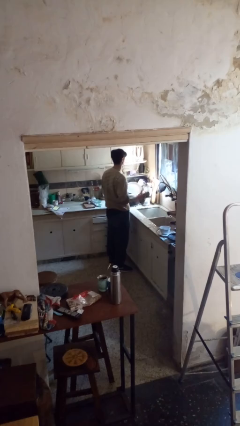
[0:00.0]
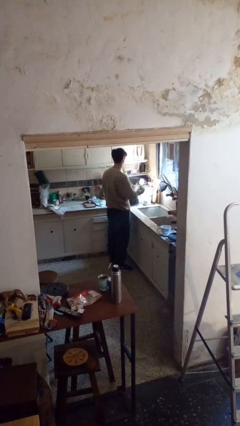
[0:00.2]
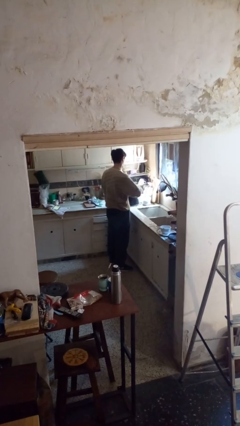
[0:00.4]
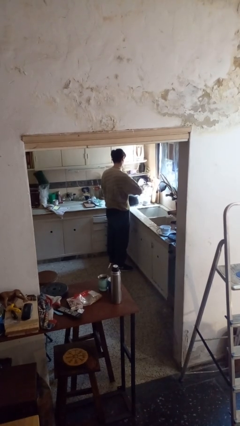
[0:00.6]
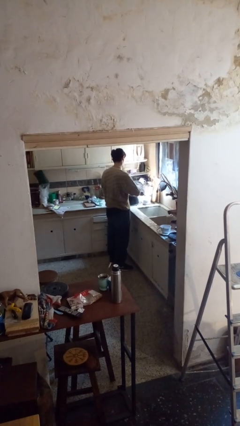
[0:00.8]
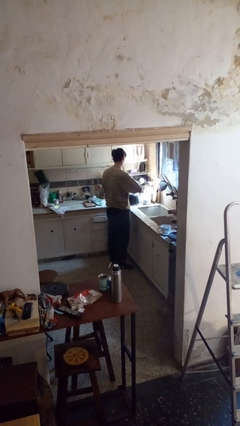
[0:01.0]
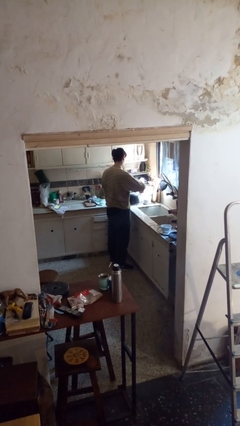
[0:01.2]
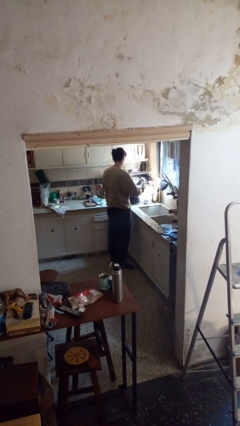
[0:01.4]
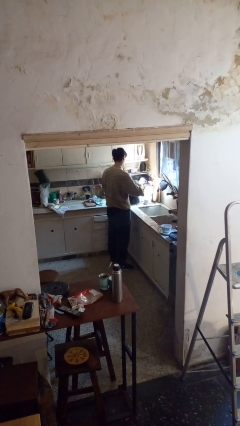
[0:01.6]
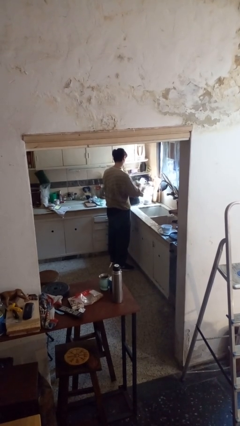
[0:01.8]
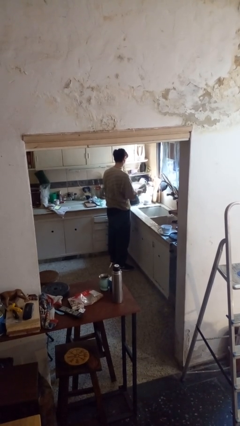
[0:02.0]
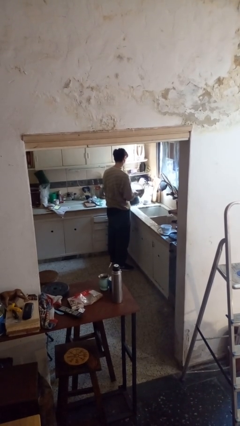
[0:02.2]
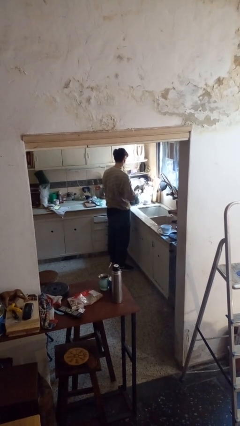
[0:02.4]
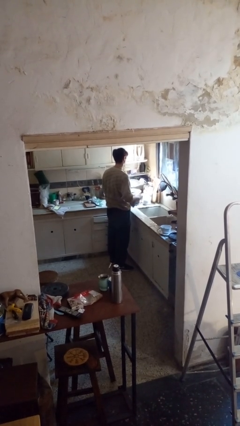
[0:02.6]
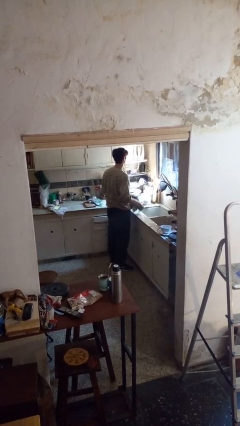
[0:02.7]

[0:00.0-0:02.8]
person dries dish

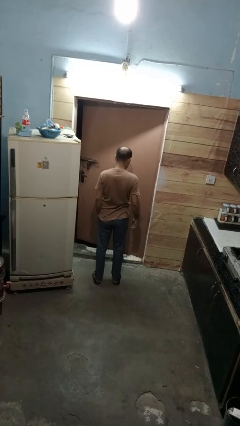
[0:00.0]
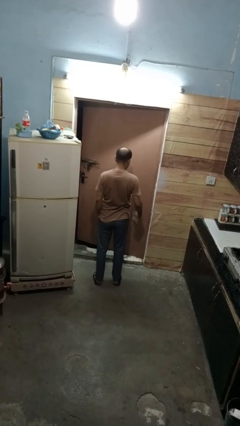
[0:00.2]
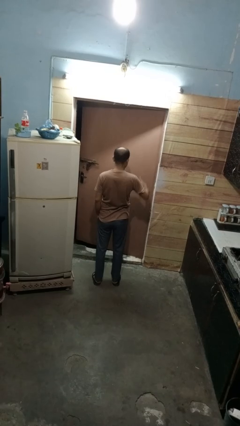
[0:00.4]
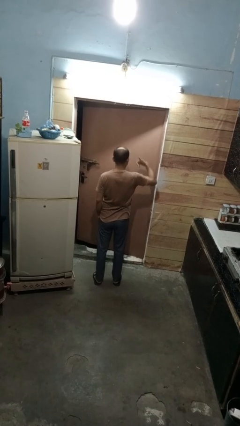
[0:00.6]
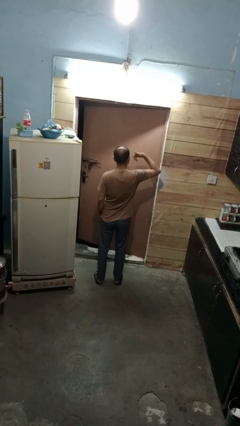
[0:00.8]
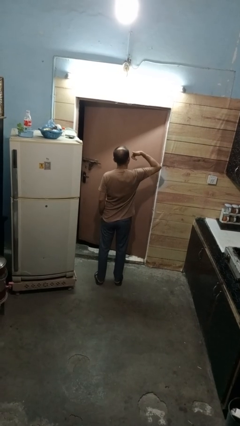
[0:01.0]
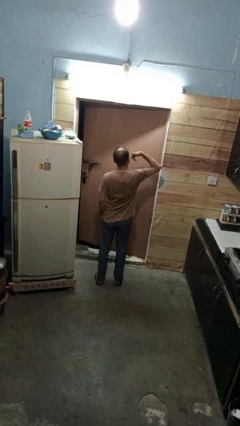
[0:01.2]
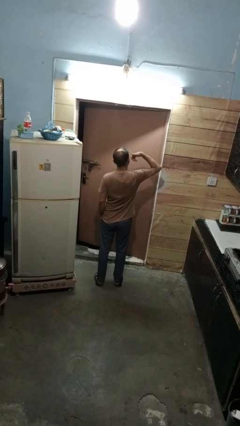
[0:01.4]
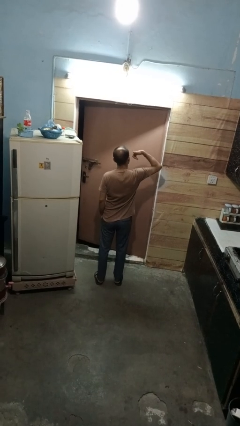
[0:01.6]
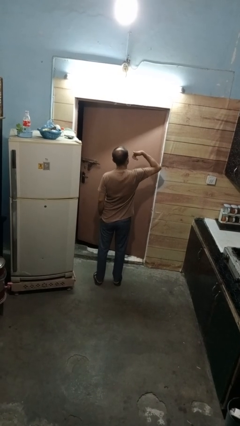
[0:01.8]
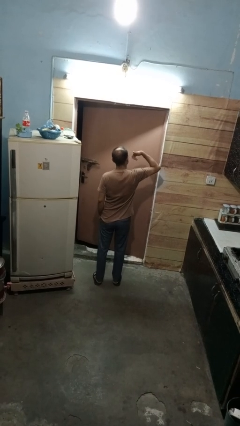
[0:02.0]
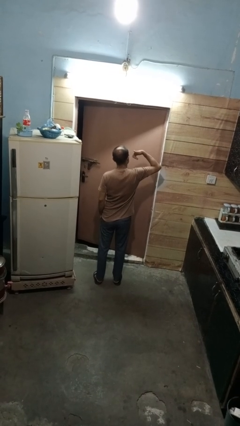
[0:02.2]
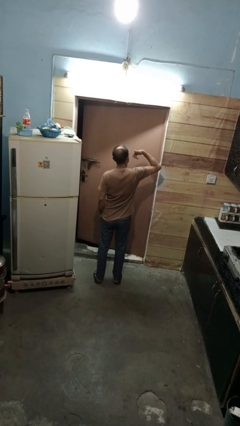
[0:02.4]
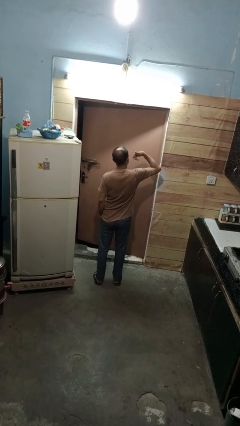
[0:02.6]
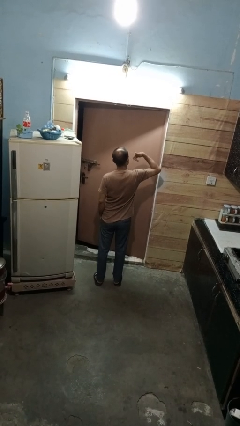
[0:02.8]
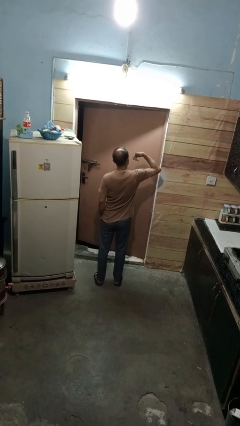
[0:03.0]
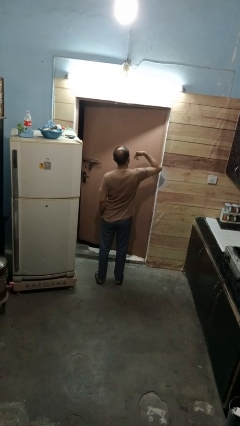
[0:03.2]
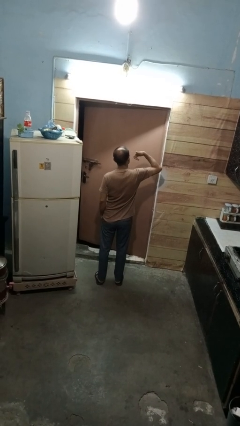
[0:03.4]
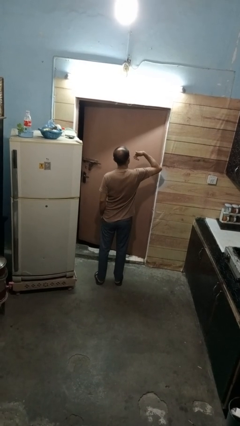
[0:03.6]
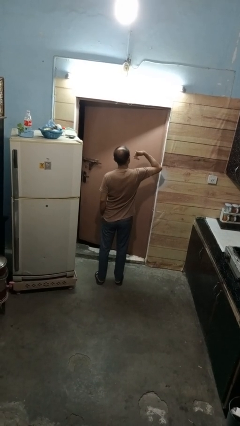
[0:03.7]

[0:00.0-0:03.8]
person gestures call me

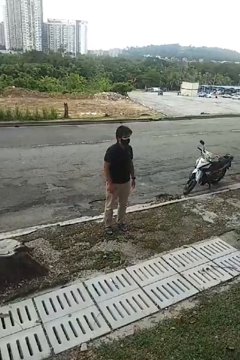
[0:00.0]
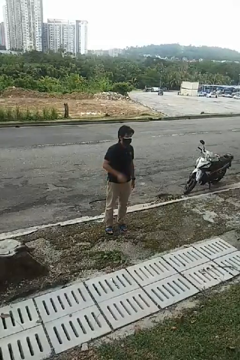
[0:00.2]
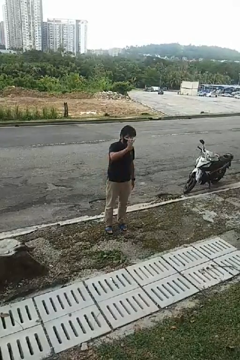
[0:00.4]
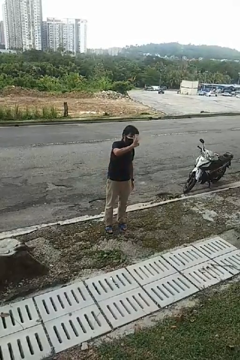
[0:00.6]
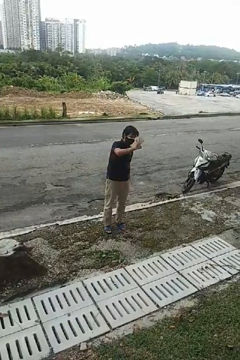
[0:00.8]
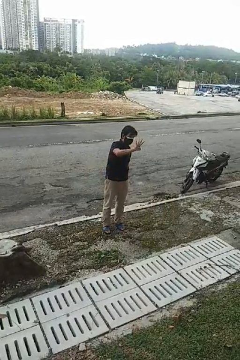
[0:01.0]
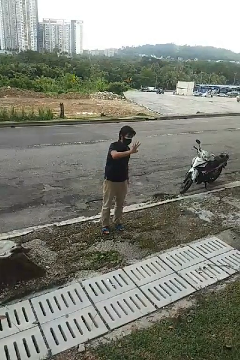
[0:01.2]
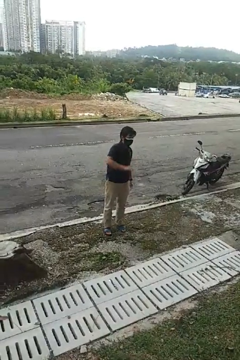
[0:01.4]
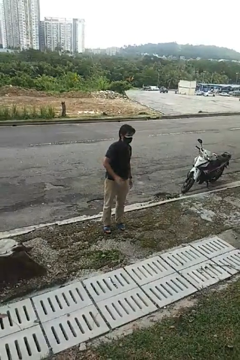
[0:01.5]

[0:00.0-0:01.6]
person gestures number four

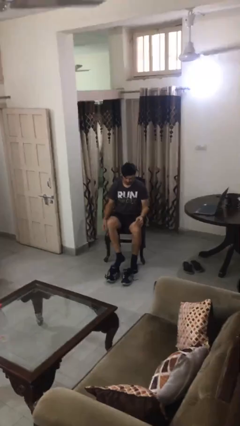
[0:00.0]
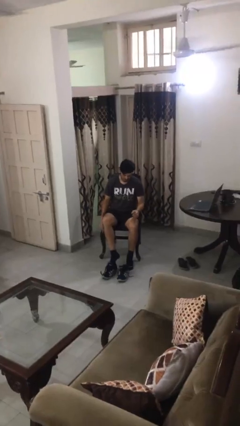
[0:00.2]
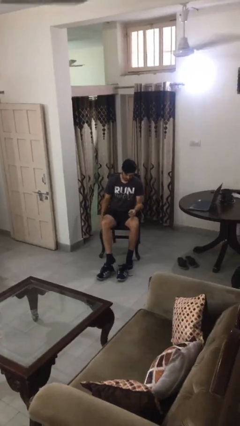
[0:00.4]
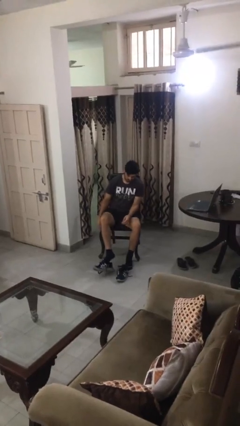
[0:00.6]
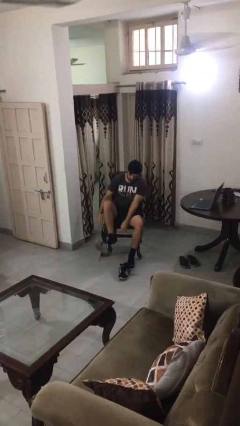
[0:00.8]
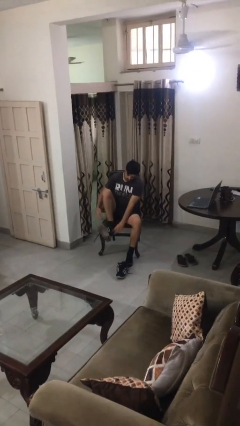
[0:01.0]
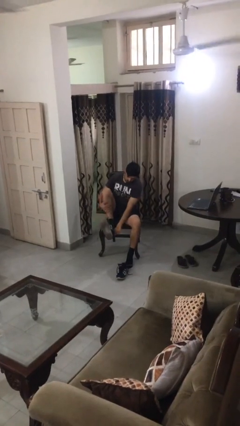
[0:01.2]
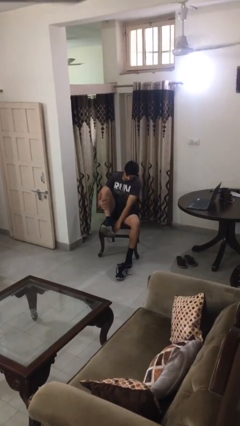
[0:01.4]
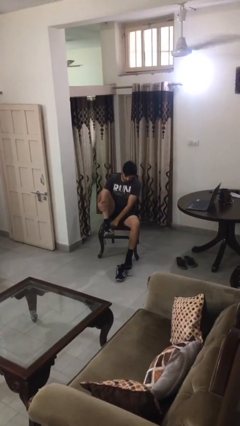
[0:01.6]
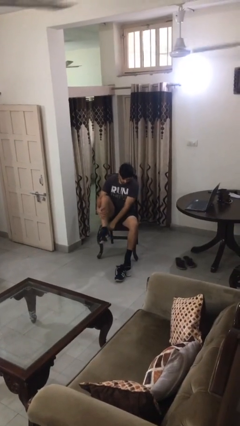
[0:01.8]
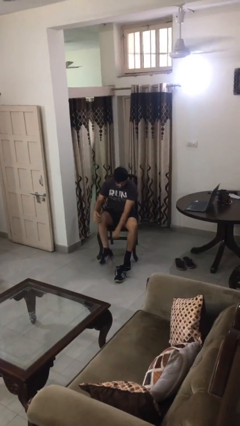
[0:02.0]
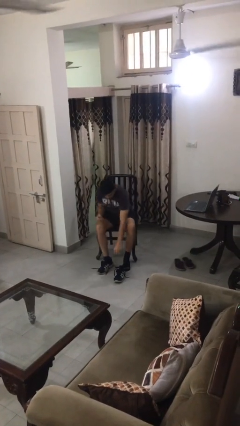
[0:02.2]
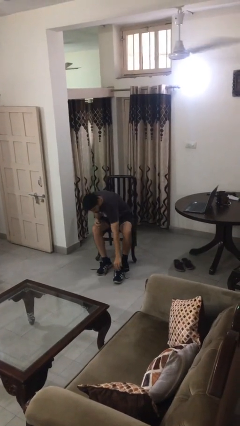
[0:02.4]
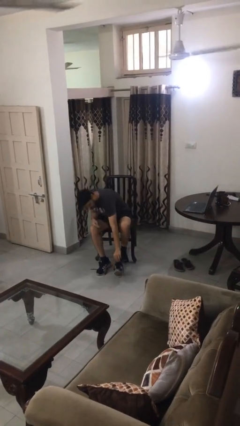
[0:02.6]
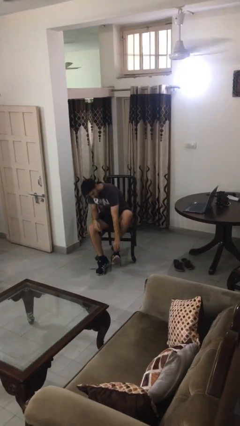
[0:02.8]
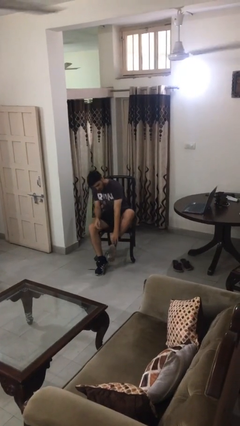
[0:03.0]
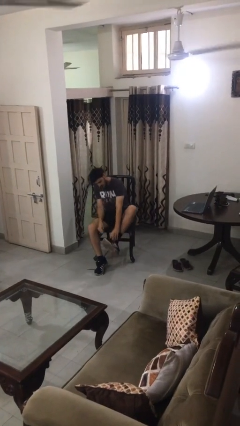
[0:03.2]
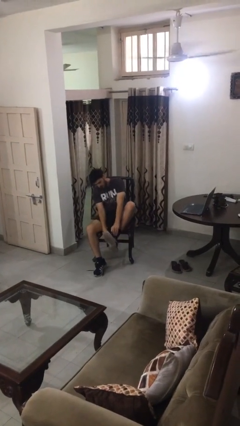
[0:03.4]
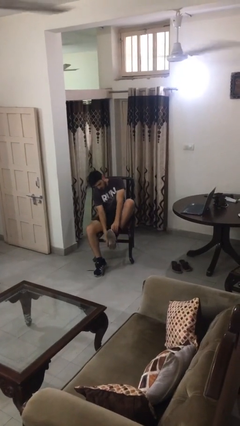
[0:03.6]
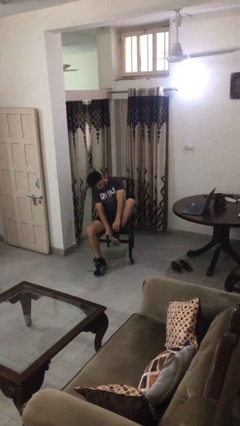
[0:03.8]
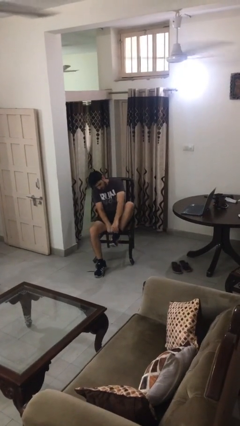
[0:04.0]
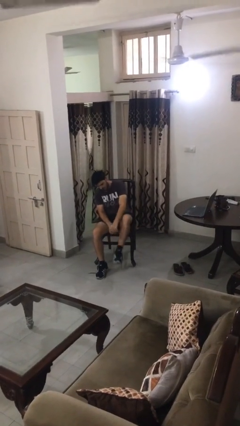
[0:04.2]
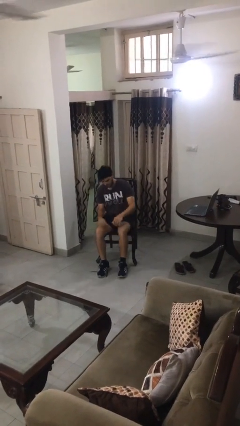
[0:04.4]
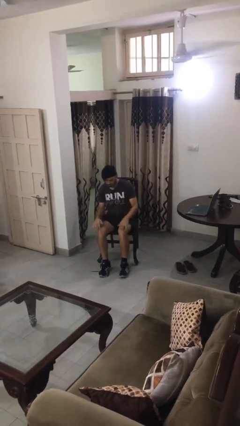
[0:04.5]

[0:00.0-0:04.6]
person puts on shoes

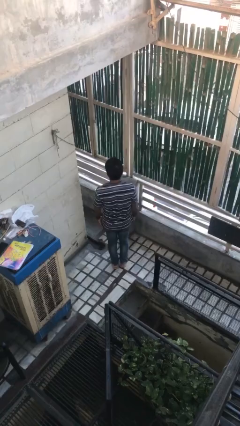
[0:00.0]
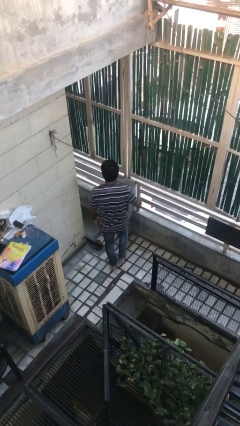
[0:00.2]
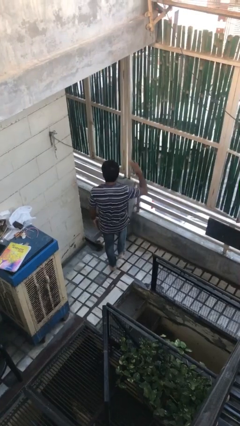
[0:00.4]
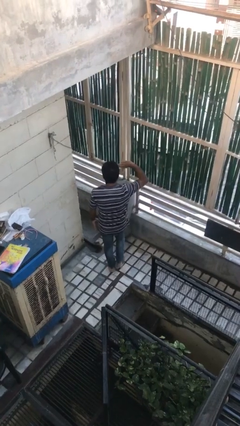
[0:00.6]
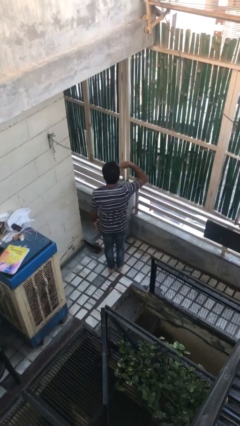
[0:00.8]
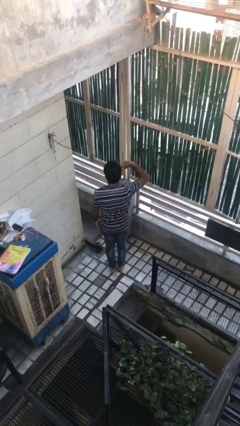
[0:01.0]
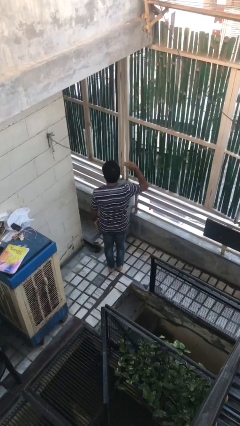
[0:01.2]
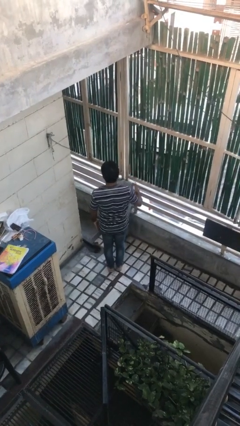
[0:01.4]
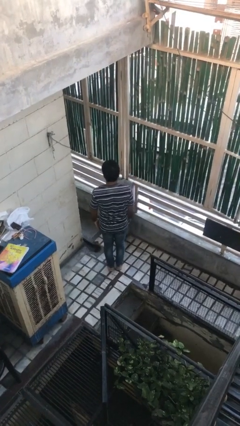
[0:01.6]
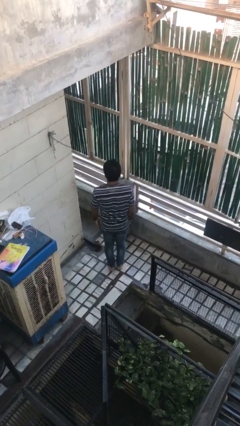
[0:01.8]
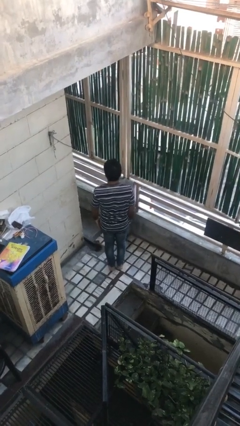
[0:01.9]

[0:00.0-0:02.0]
person salutes

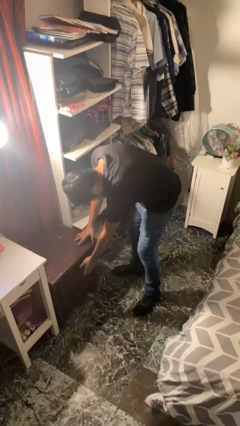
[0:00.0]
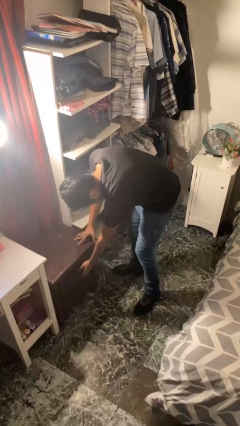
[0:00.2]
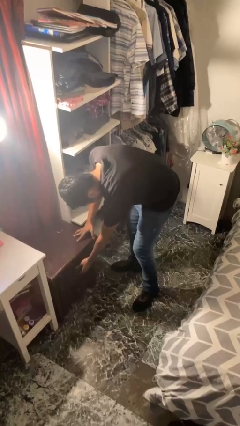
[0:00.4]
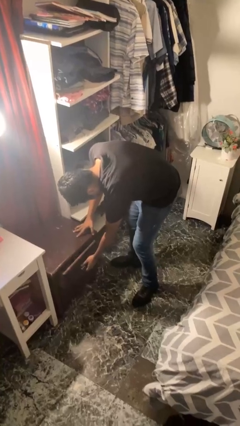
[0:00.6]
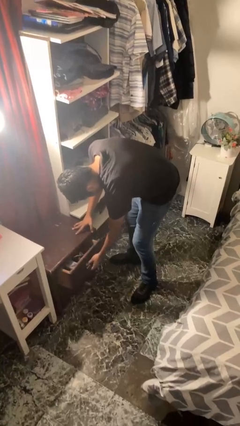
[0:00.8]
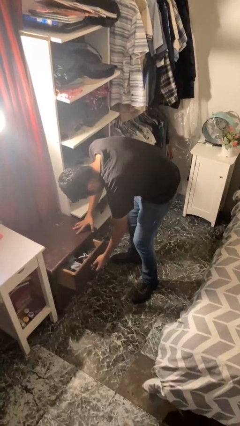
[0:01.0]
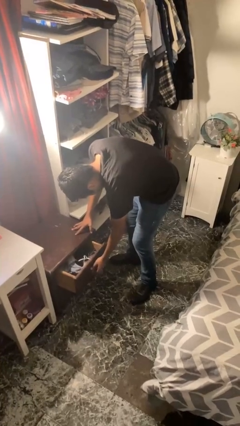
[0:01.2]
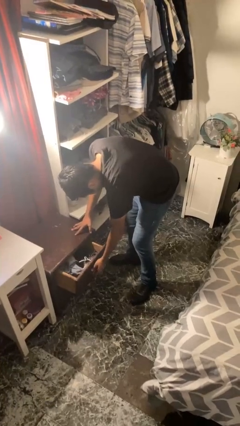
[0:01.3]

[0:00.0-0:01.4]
person opens dresser drawer

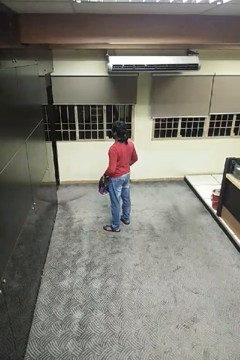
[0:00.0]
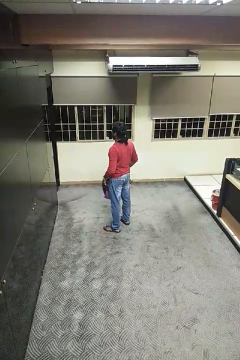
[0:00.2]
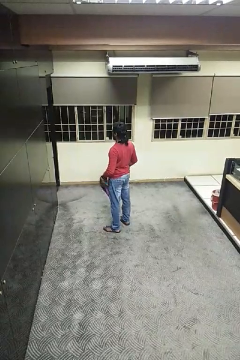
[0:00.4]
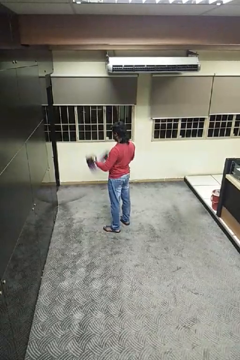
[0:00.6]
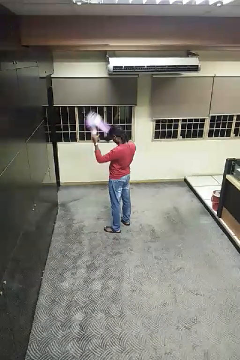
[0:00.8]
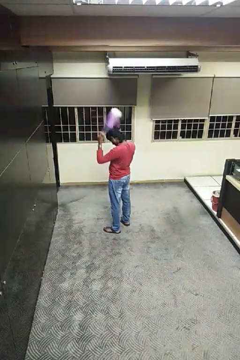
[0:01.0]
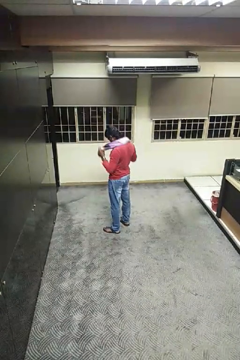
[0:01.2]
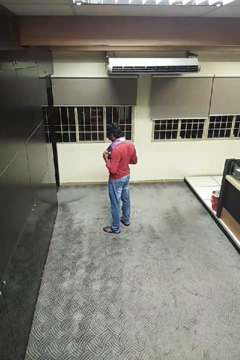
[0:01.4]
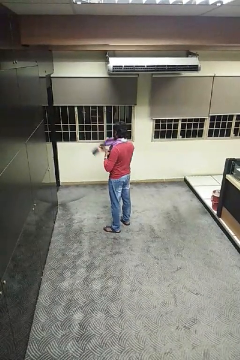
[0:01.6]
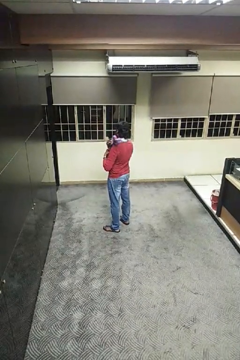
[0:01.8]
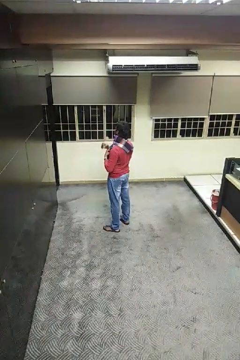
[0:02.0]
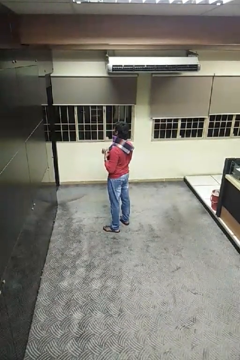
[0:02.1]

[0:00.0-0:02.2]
person puts on scarf
